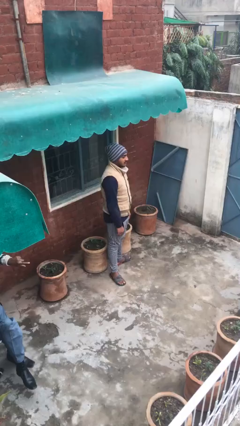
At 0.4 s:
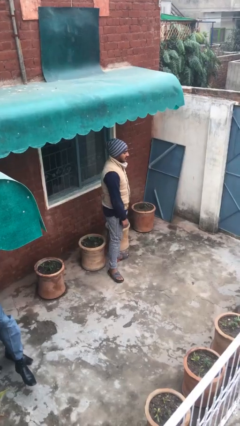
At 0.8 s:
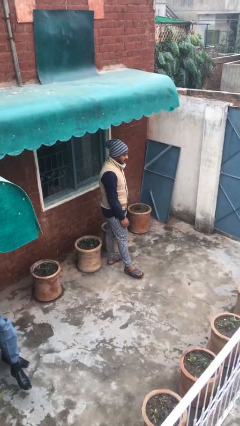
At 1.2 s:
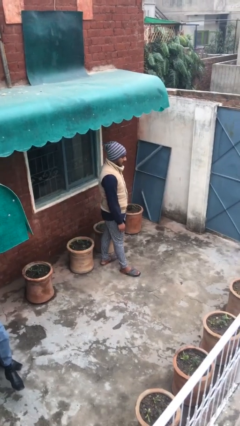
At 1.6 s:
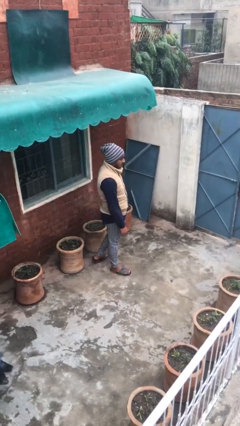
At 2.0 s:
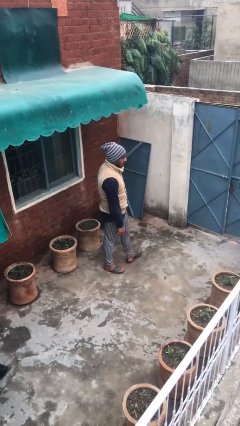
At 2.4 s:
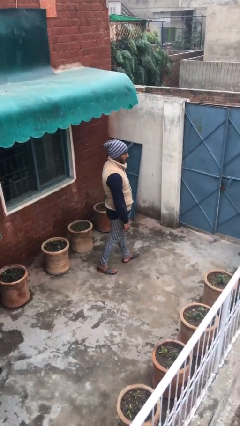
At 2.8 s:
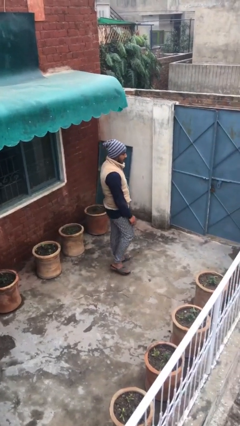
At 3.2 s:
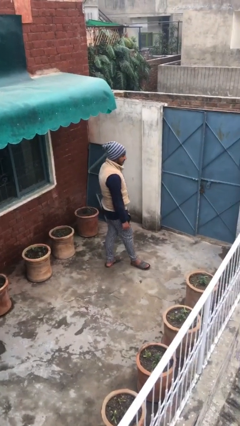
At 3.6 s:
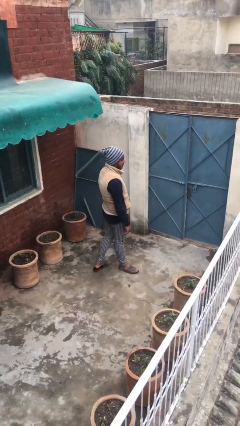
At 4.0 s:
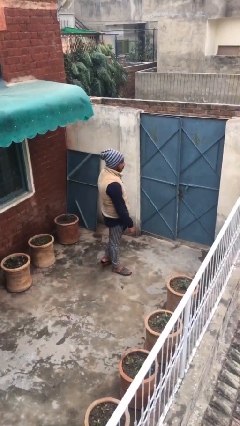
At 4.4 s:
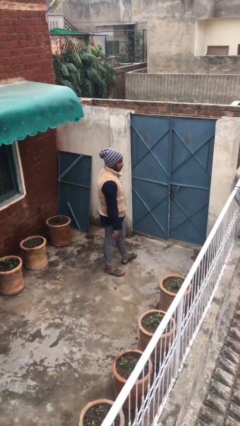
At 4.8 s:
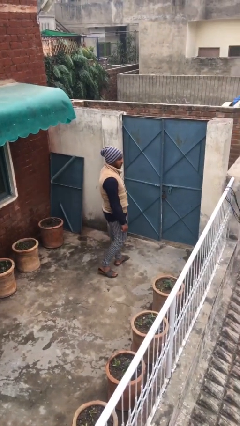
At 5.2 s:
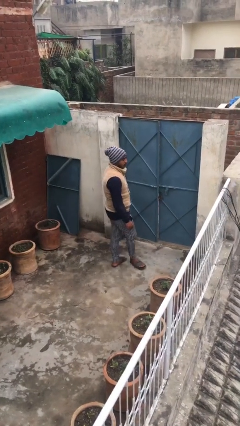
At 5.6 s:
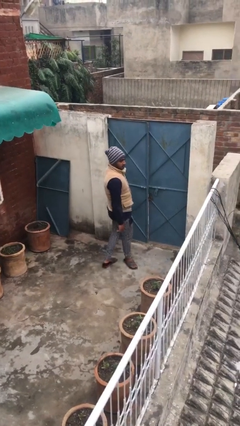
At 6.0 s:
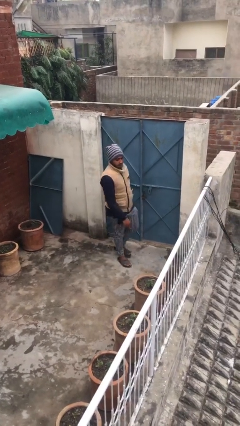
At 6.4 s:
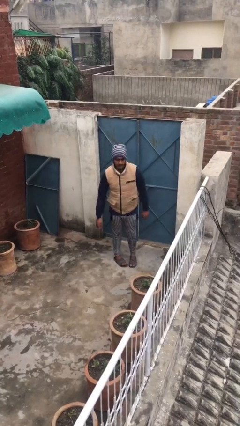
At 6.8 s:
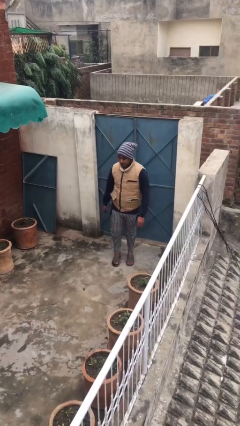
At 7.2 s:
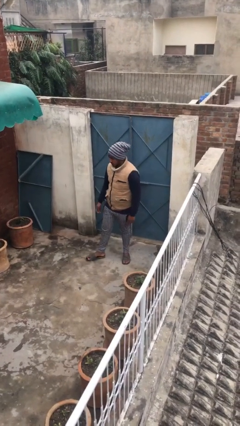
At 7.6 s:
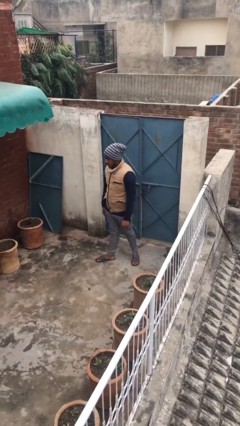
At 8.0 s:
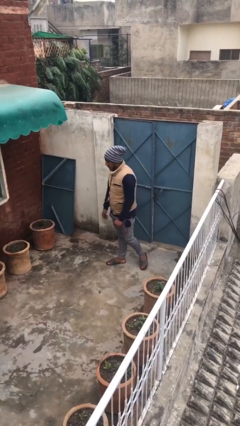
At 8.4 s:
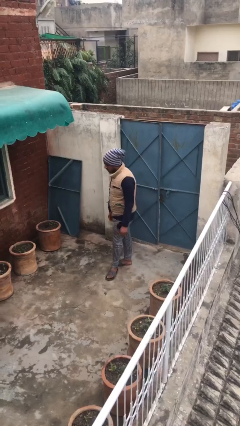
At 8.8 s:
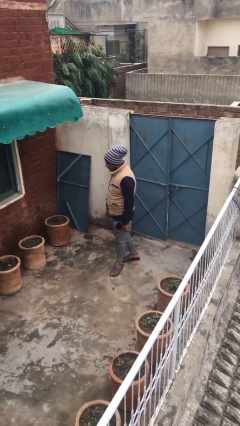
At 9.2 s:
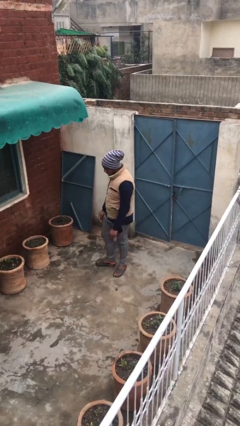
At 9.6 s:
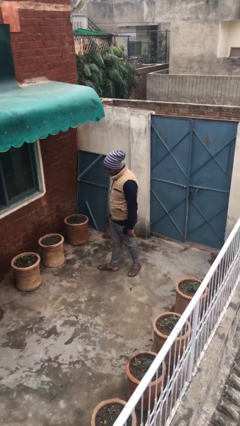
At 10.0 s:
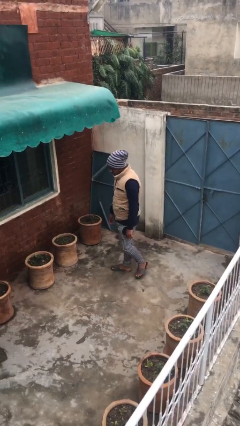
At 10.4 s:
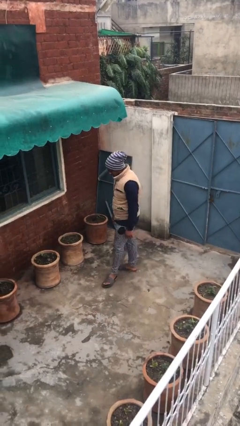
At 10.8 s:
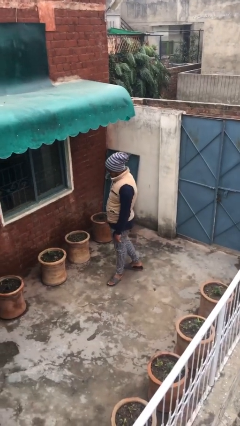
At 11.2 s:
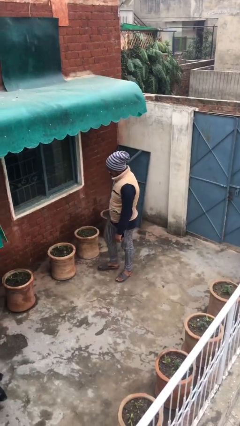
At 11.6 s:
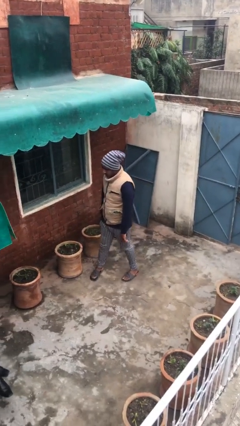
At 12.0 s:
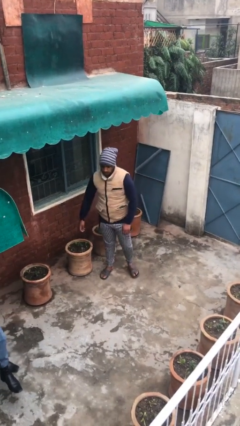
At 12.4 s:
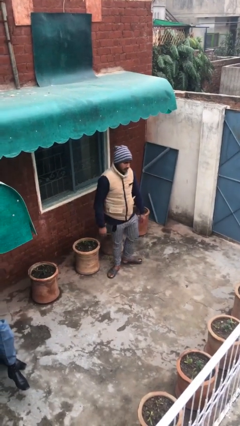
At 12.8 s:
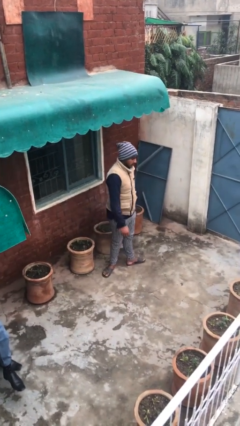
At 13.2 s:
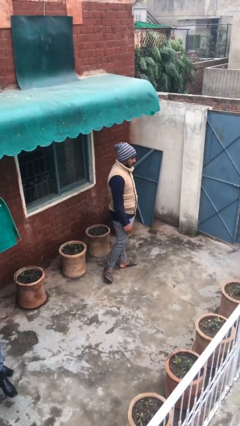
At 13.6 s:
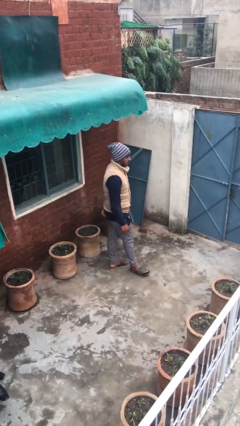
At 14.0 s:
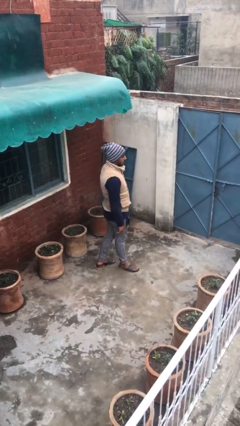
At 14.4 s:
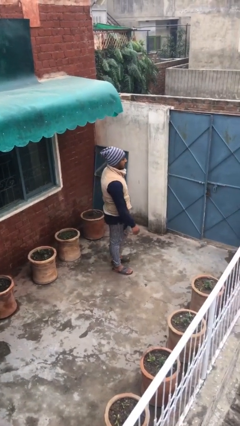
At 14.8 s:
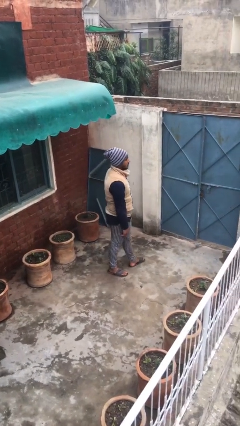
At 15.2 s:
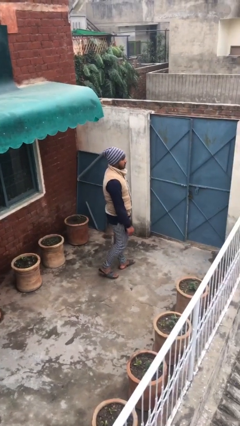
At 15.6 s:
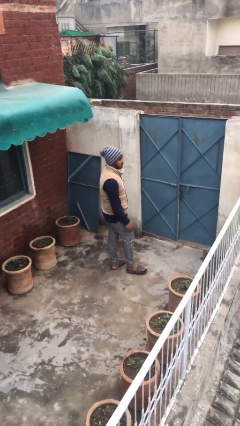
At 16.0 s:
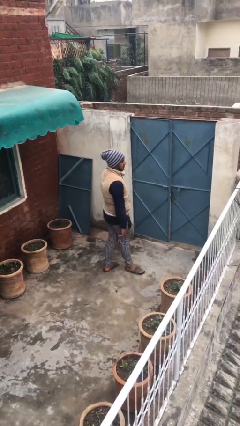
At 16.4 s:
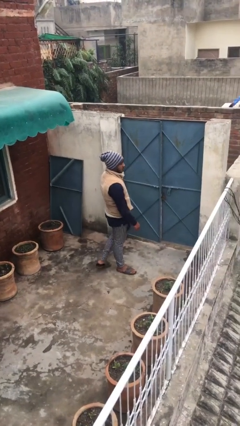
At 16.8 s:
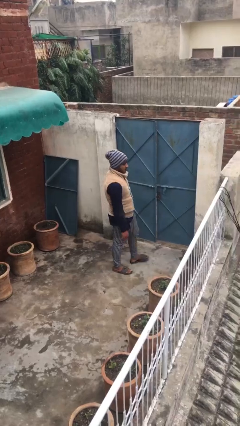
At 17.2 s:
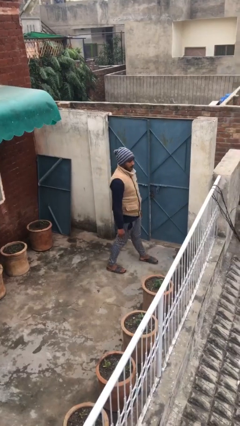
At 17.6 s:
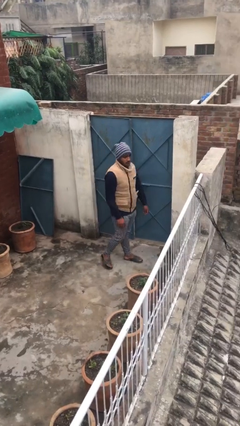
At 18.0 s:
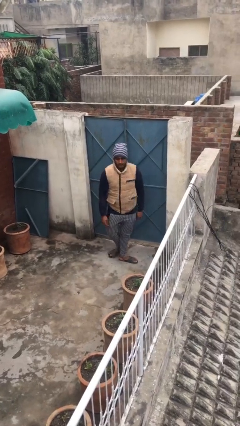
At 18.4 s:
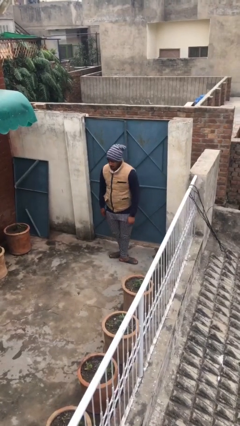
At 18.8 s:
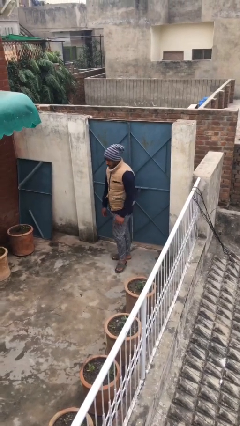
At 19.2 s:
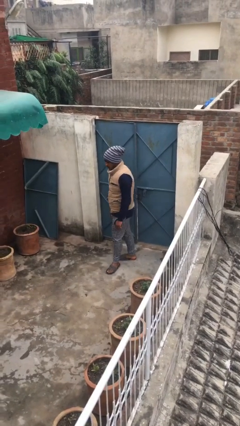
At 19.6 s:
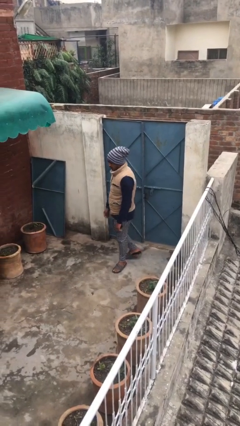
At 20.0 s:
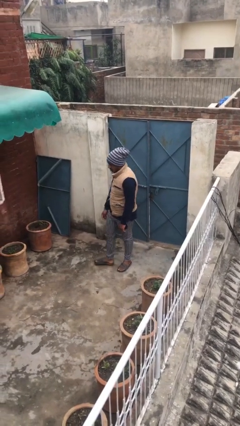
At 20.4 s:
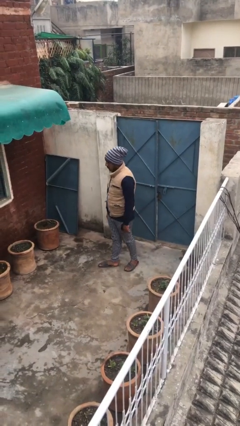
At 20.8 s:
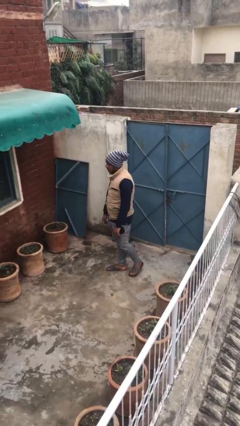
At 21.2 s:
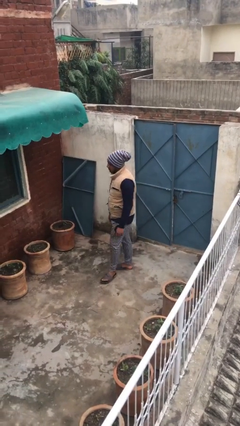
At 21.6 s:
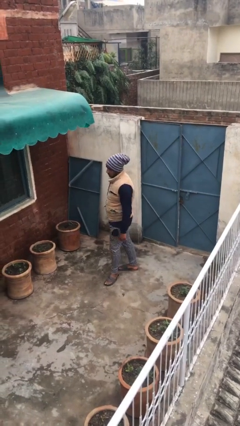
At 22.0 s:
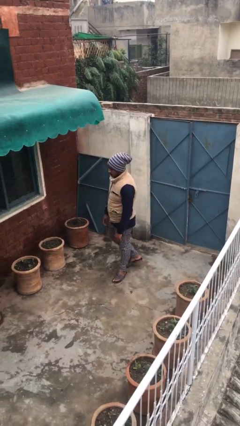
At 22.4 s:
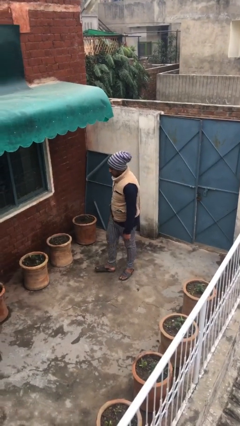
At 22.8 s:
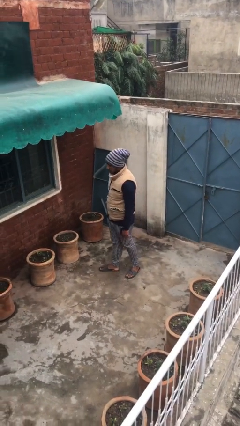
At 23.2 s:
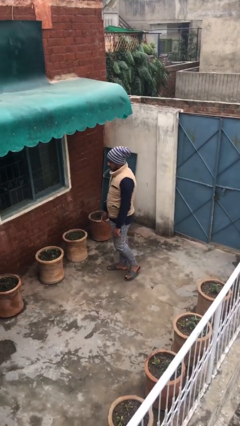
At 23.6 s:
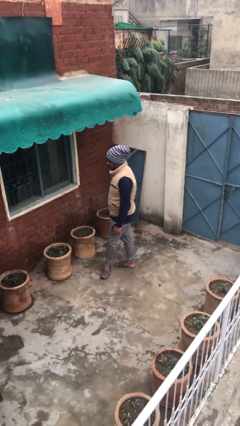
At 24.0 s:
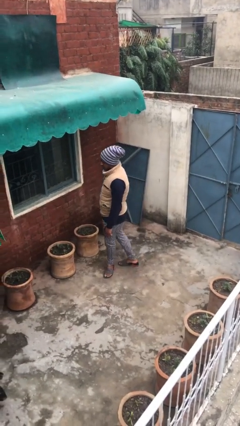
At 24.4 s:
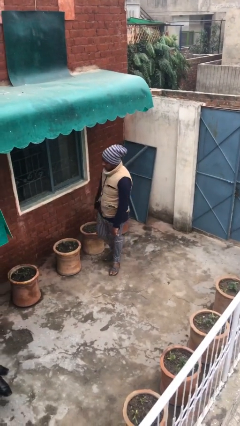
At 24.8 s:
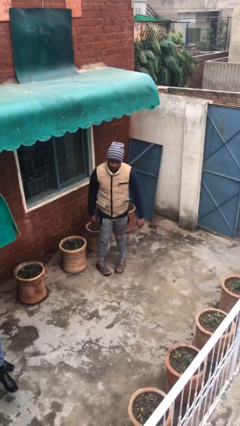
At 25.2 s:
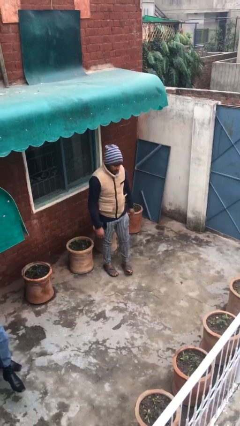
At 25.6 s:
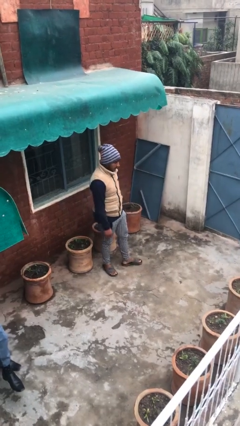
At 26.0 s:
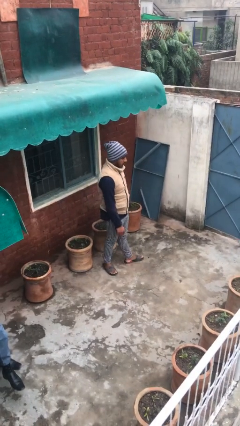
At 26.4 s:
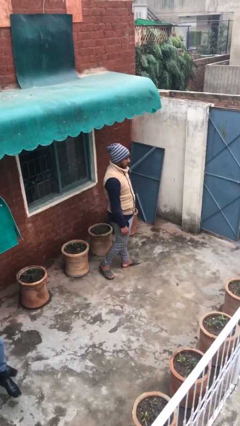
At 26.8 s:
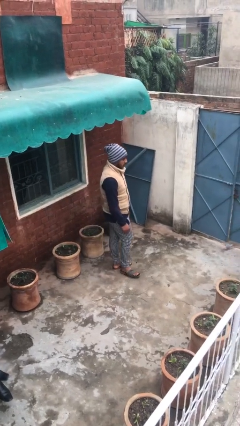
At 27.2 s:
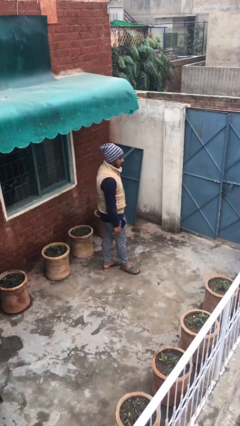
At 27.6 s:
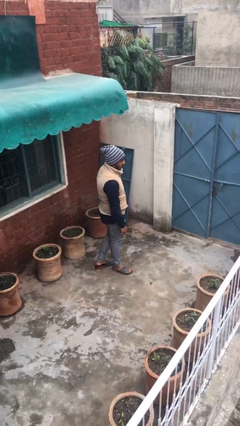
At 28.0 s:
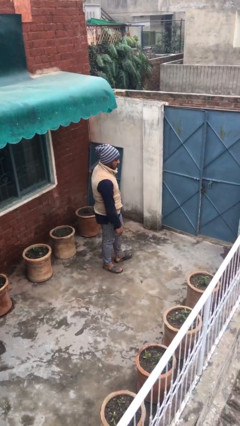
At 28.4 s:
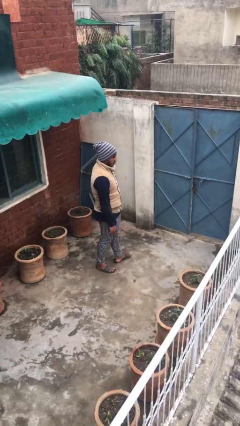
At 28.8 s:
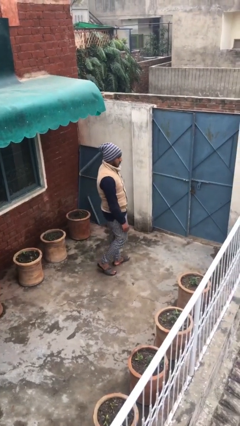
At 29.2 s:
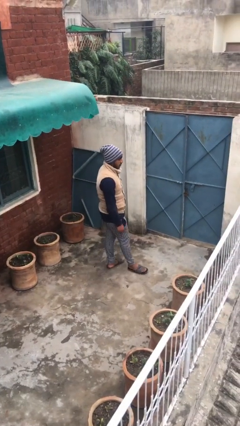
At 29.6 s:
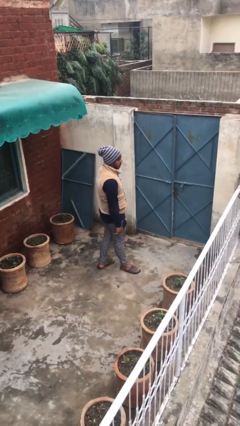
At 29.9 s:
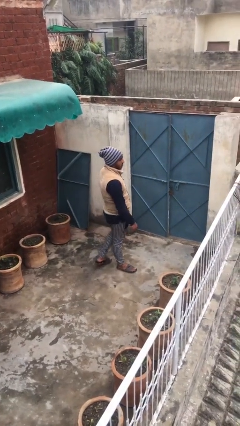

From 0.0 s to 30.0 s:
person walks

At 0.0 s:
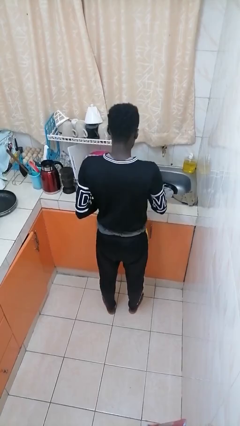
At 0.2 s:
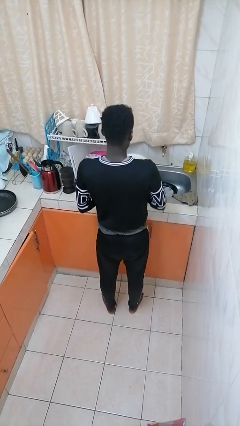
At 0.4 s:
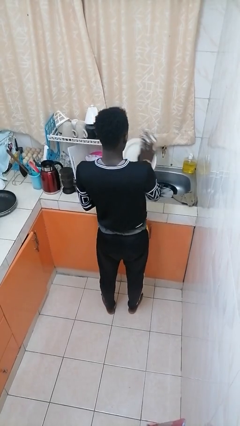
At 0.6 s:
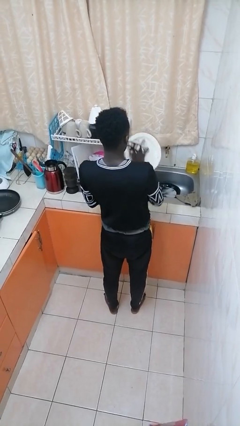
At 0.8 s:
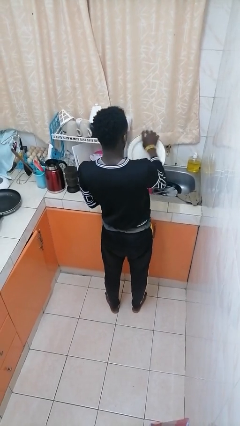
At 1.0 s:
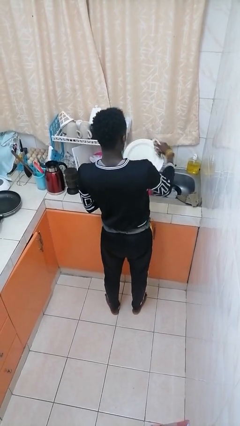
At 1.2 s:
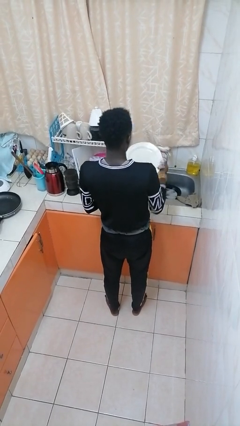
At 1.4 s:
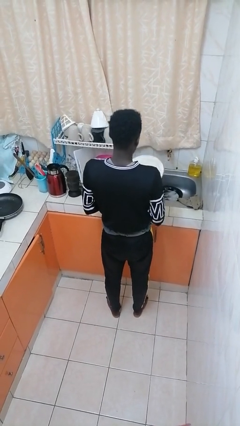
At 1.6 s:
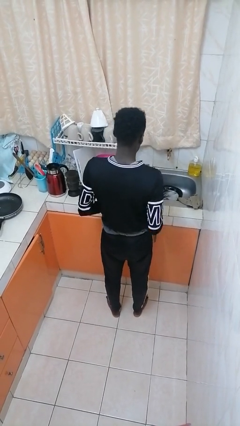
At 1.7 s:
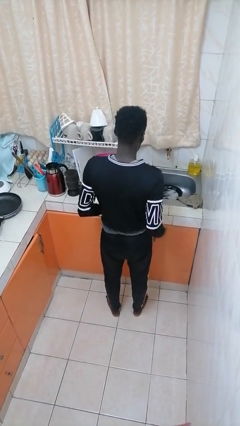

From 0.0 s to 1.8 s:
person dries dish

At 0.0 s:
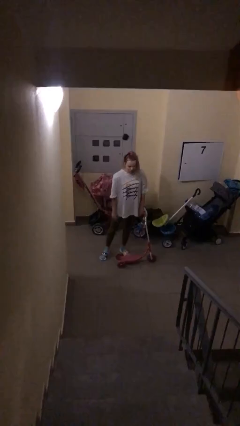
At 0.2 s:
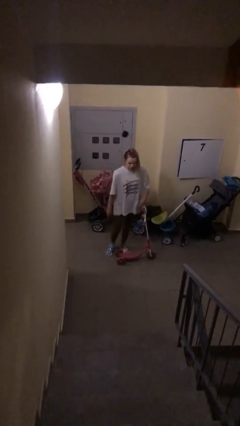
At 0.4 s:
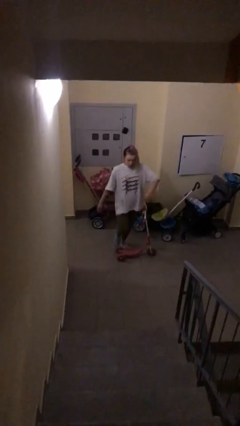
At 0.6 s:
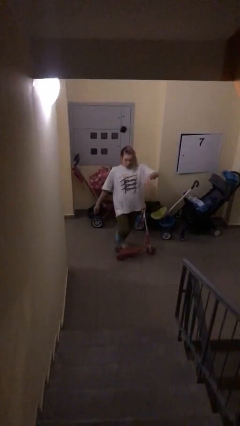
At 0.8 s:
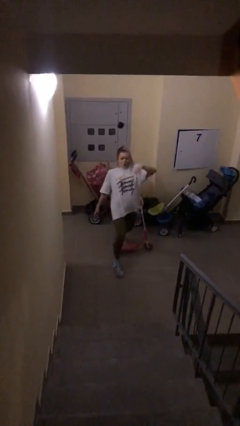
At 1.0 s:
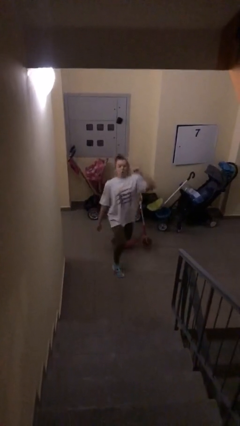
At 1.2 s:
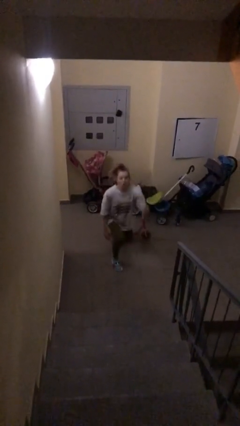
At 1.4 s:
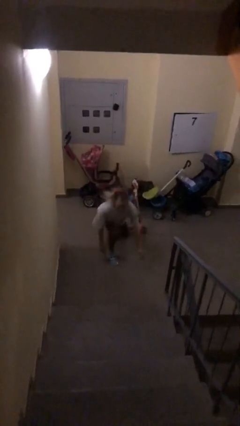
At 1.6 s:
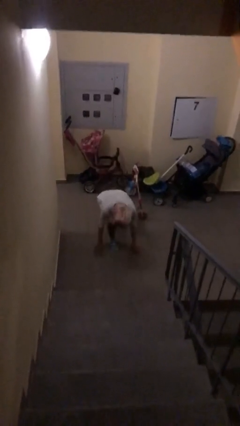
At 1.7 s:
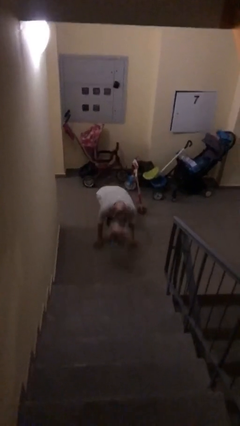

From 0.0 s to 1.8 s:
person trips on object on floor
